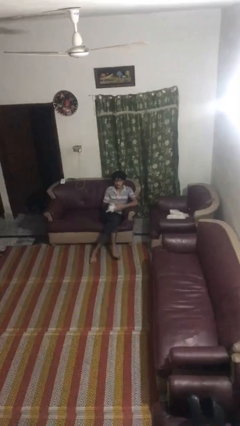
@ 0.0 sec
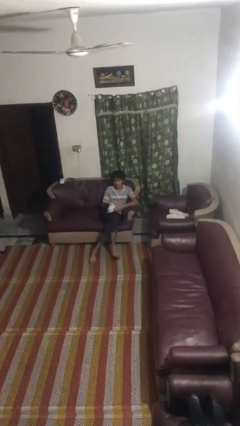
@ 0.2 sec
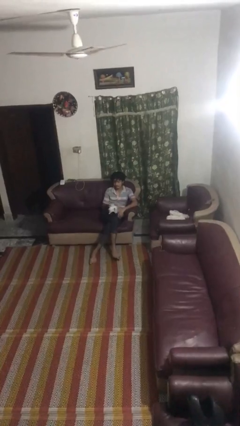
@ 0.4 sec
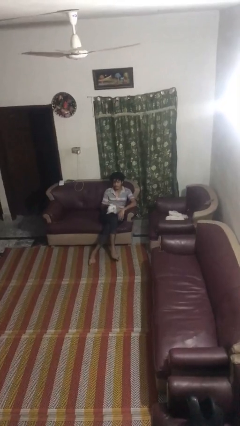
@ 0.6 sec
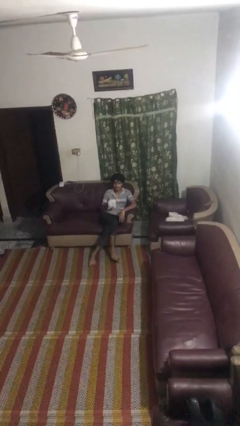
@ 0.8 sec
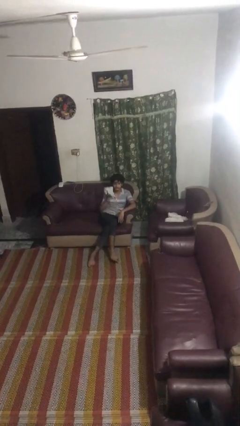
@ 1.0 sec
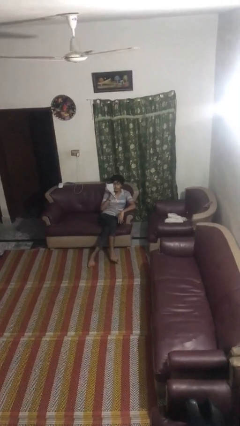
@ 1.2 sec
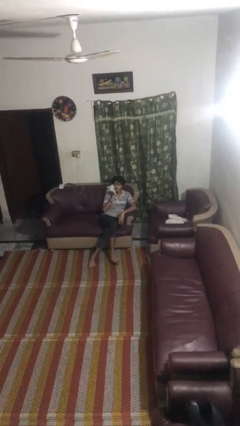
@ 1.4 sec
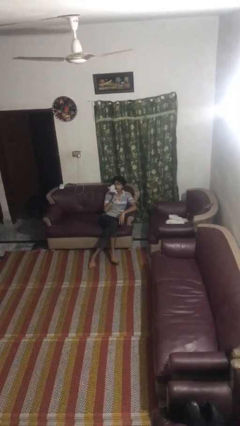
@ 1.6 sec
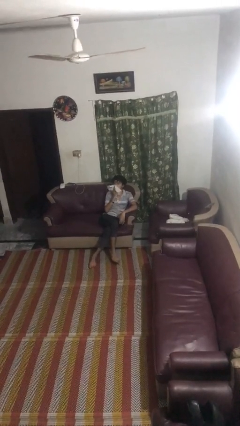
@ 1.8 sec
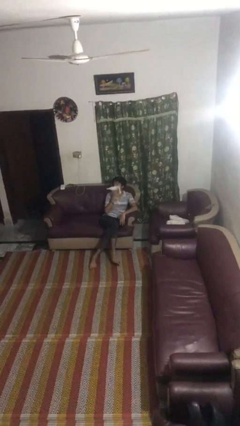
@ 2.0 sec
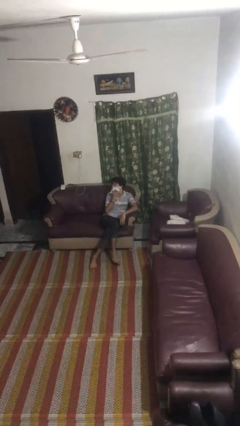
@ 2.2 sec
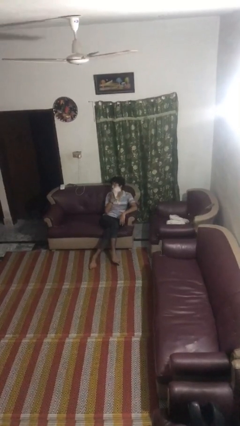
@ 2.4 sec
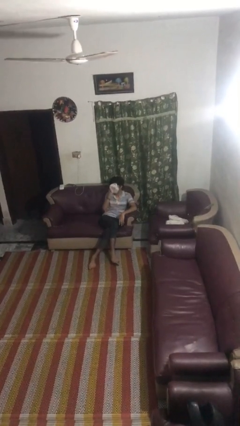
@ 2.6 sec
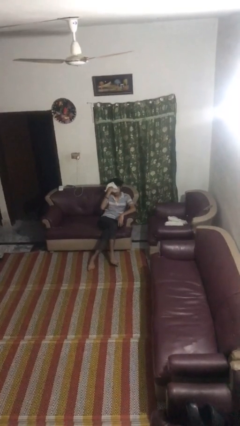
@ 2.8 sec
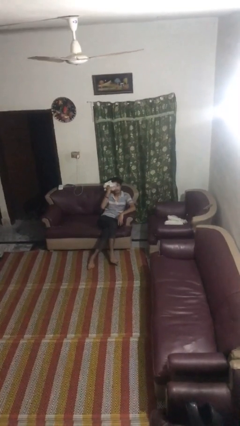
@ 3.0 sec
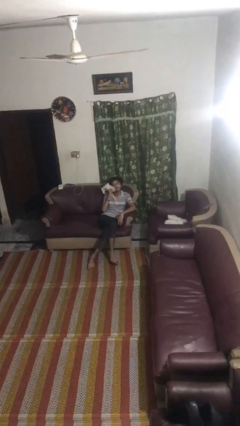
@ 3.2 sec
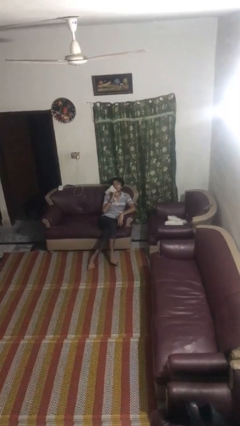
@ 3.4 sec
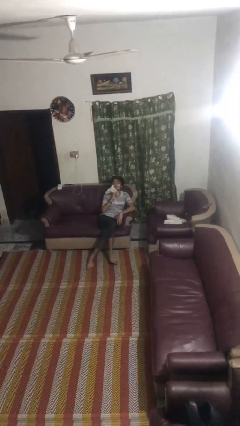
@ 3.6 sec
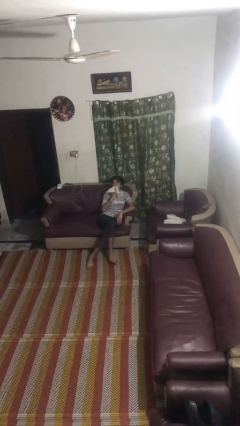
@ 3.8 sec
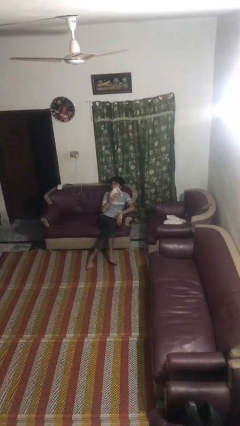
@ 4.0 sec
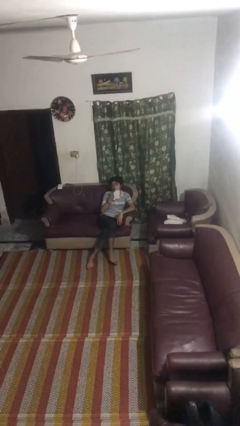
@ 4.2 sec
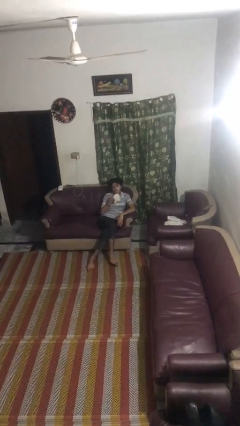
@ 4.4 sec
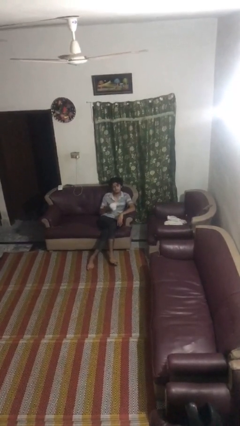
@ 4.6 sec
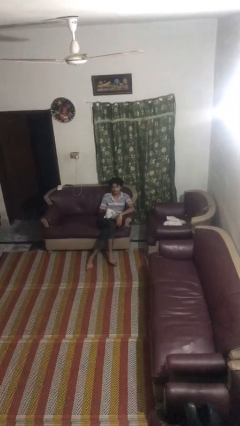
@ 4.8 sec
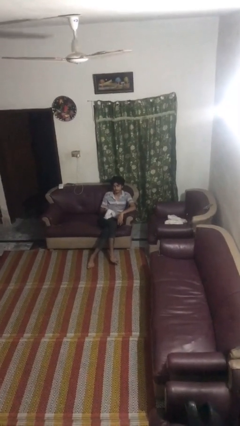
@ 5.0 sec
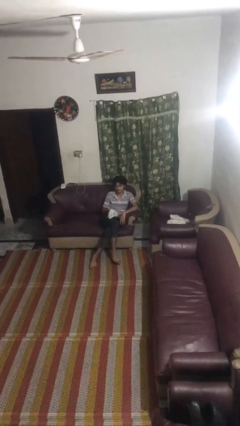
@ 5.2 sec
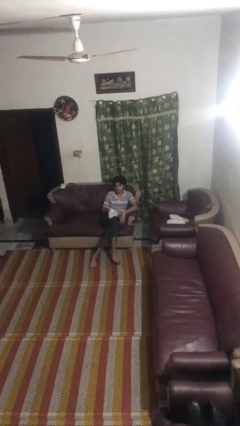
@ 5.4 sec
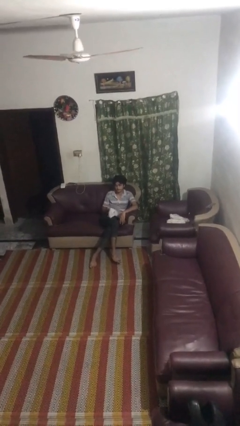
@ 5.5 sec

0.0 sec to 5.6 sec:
person wipes mouth with napkin

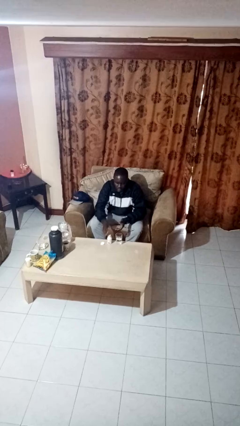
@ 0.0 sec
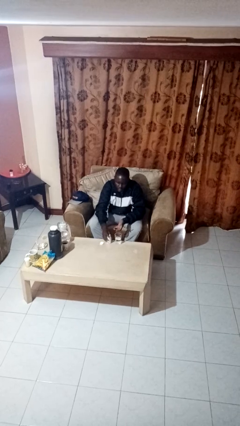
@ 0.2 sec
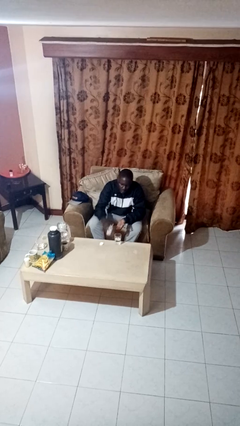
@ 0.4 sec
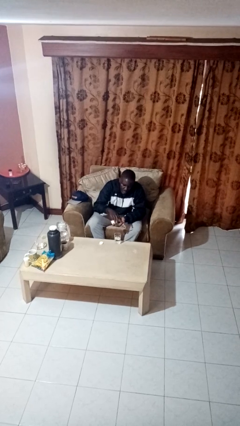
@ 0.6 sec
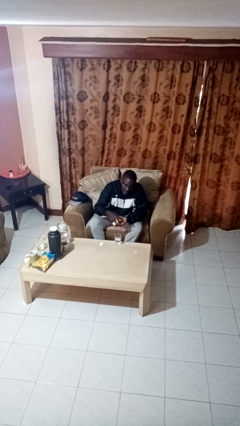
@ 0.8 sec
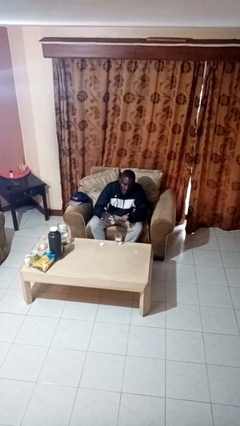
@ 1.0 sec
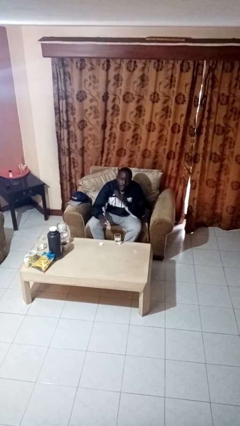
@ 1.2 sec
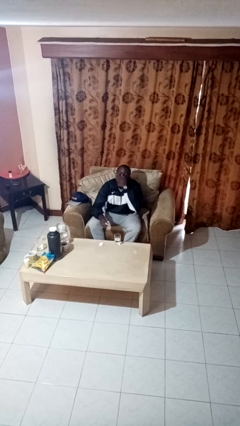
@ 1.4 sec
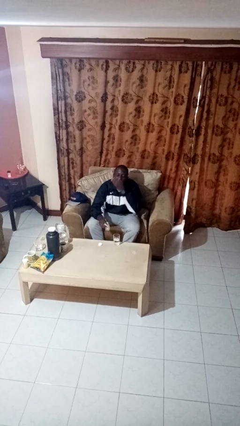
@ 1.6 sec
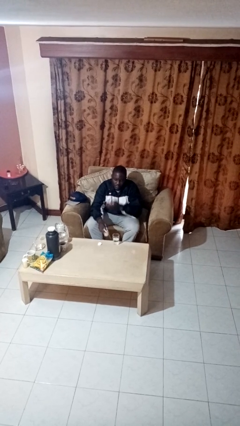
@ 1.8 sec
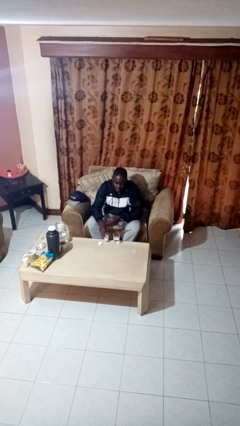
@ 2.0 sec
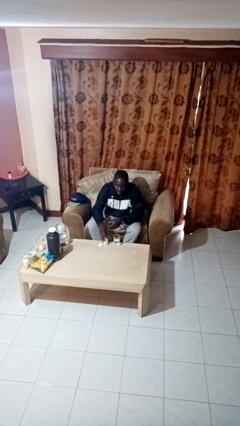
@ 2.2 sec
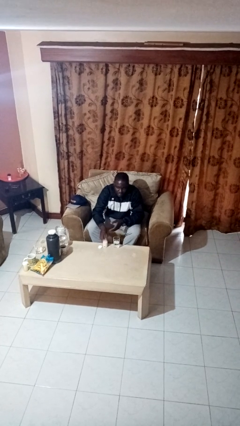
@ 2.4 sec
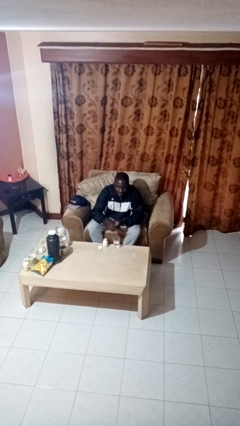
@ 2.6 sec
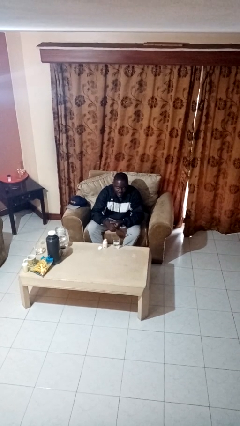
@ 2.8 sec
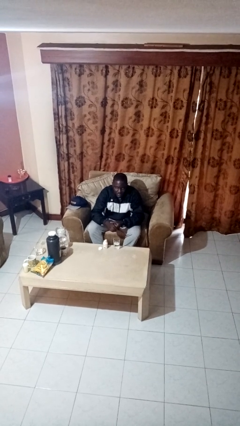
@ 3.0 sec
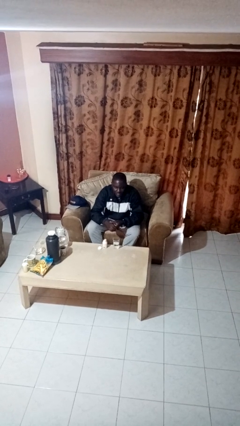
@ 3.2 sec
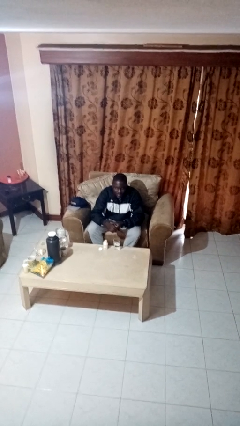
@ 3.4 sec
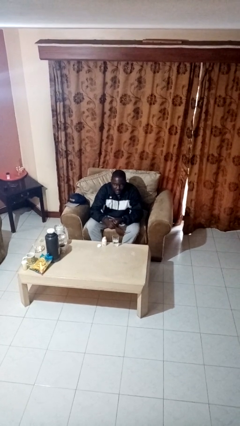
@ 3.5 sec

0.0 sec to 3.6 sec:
person takes medicine pills

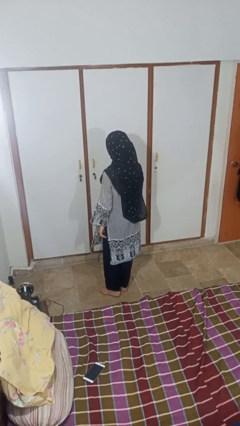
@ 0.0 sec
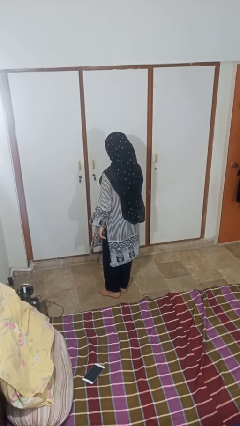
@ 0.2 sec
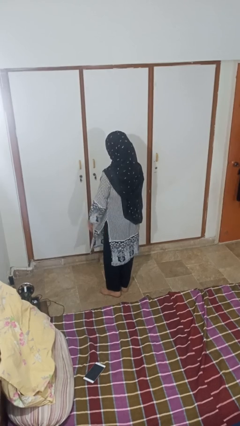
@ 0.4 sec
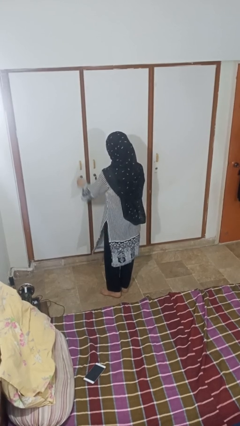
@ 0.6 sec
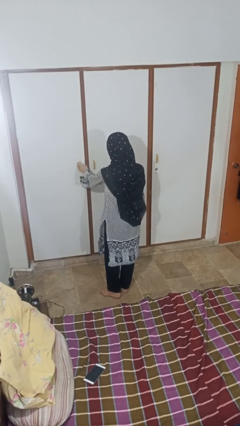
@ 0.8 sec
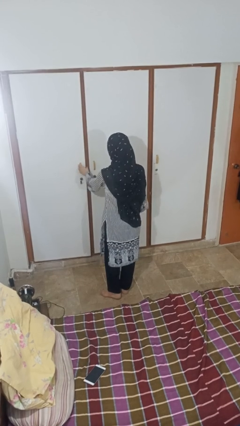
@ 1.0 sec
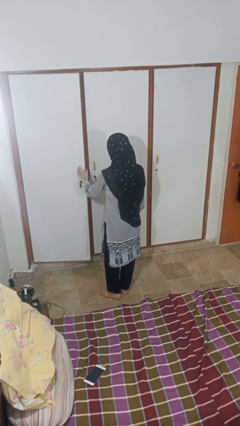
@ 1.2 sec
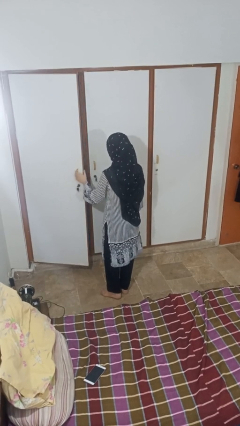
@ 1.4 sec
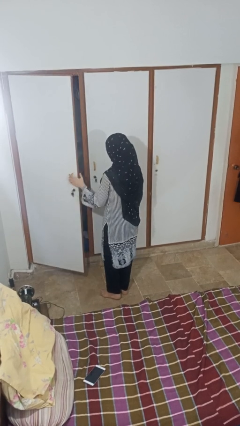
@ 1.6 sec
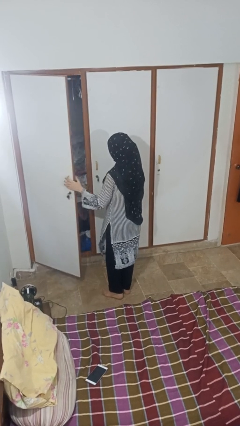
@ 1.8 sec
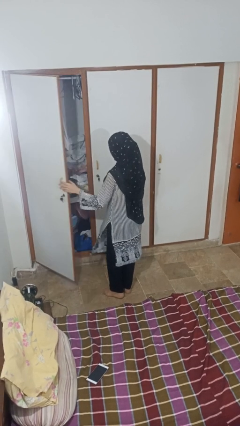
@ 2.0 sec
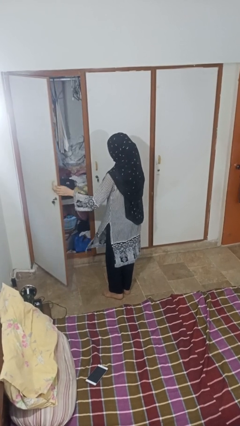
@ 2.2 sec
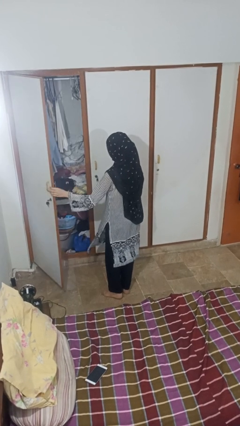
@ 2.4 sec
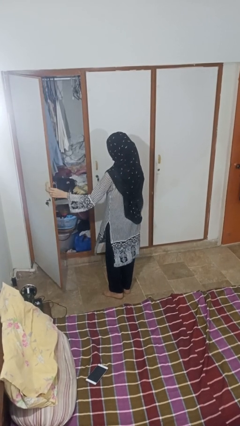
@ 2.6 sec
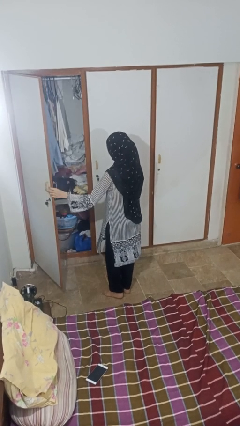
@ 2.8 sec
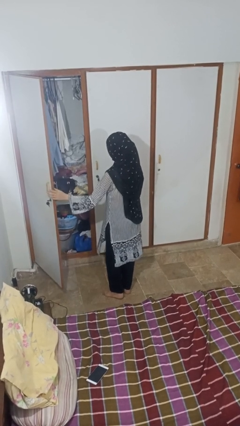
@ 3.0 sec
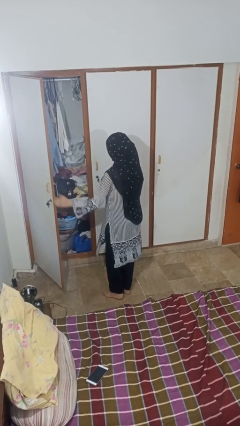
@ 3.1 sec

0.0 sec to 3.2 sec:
person opens closet door

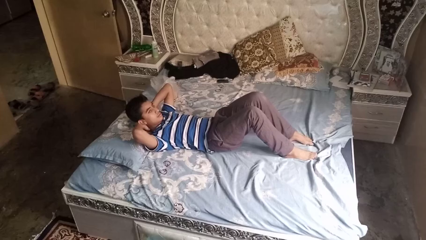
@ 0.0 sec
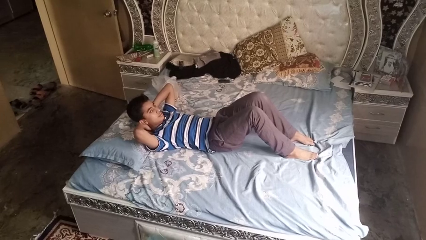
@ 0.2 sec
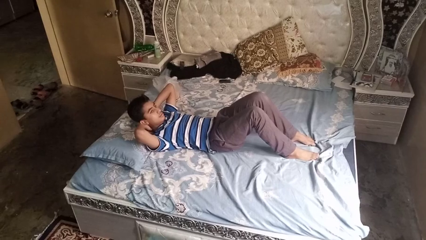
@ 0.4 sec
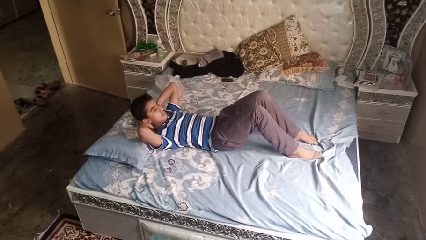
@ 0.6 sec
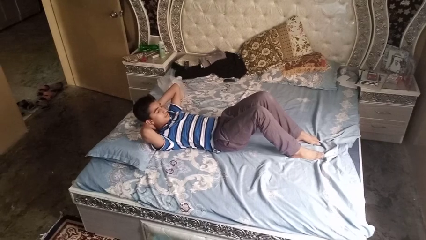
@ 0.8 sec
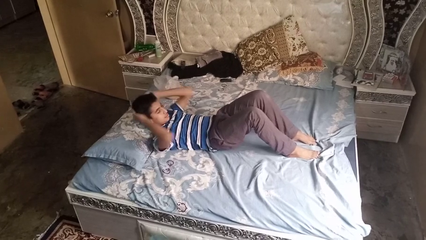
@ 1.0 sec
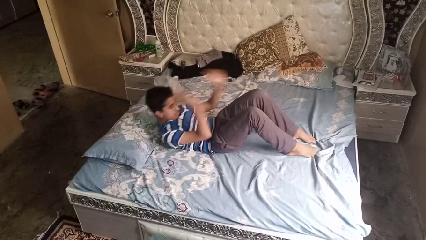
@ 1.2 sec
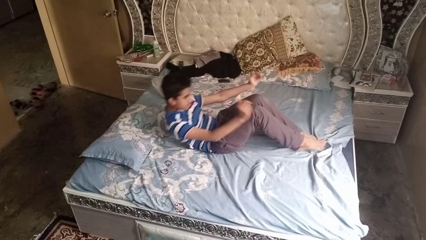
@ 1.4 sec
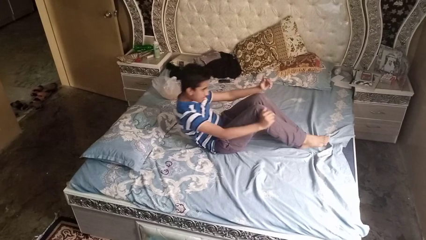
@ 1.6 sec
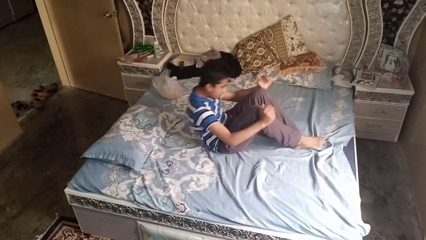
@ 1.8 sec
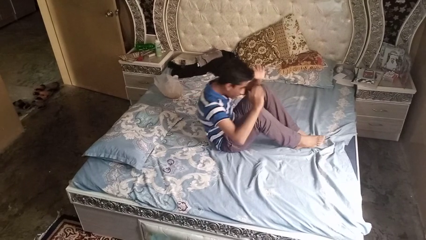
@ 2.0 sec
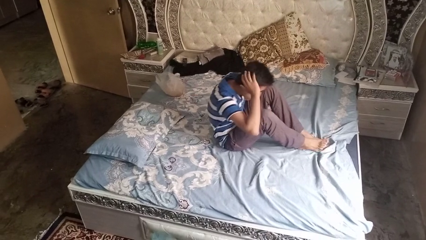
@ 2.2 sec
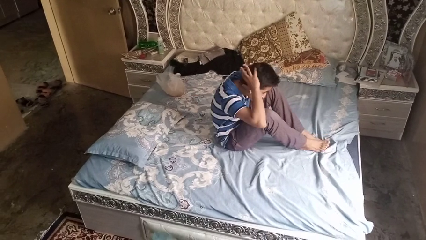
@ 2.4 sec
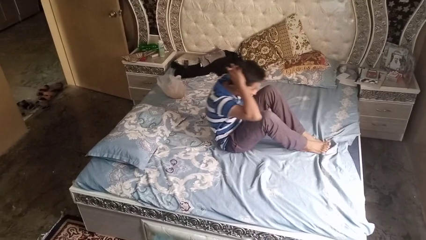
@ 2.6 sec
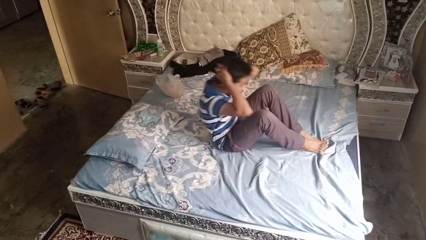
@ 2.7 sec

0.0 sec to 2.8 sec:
person exercises with situp

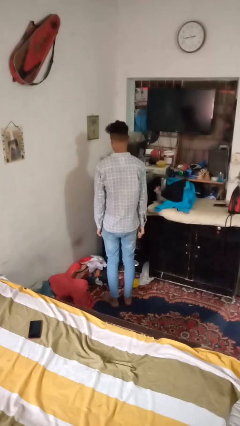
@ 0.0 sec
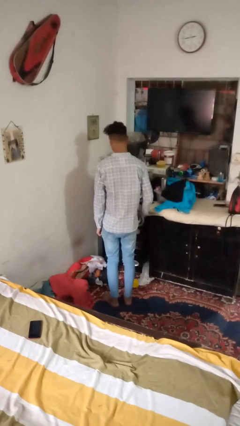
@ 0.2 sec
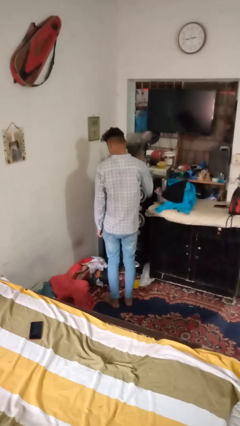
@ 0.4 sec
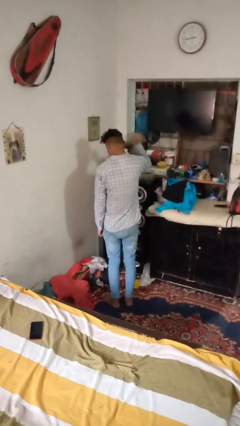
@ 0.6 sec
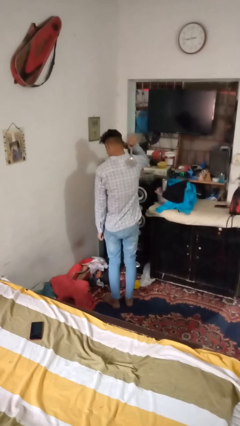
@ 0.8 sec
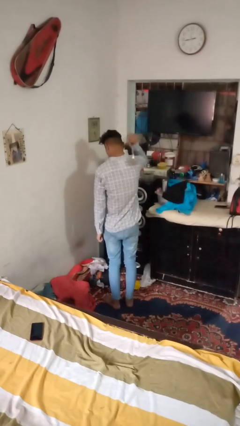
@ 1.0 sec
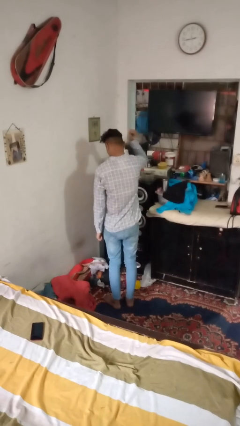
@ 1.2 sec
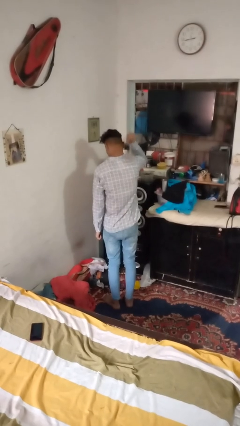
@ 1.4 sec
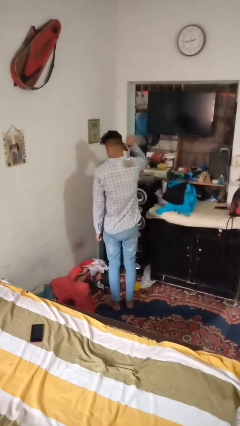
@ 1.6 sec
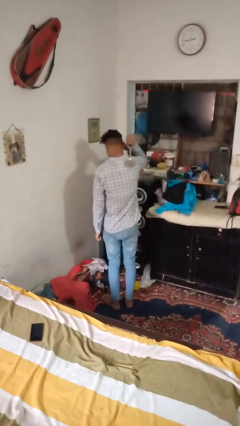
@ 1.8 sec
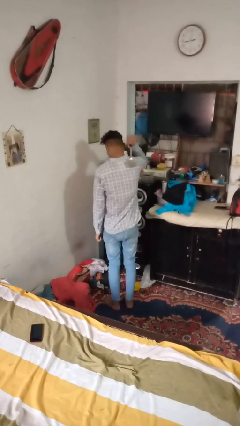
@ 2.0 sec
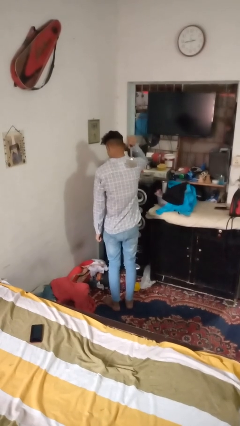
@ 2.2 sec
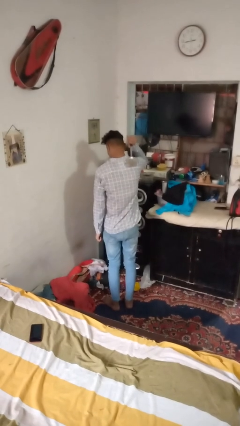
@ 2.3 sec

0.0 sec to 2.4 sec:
person swats bug
